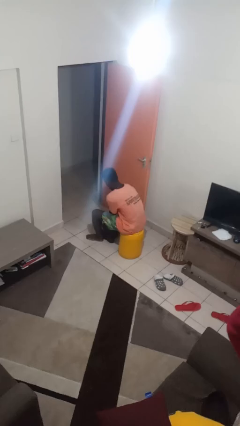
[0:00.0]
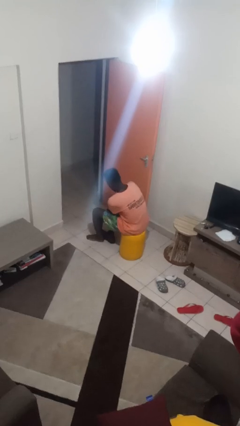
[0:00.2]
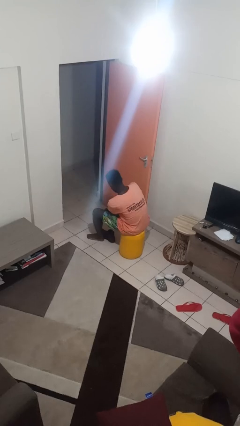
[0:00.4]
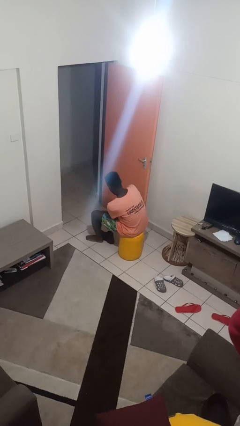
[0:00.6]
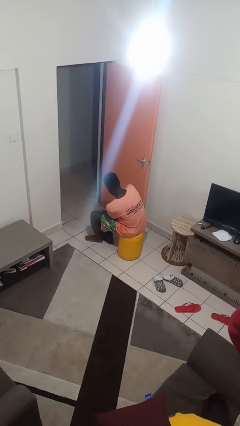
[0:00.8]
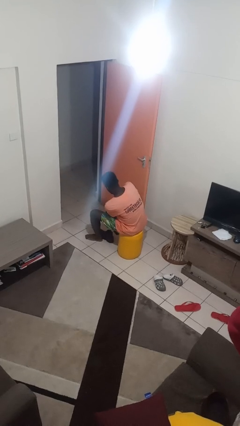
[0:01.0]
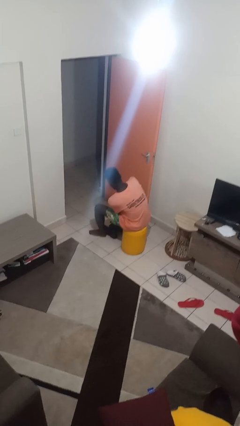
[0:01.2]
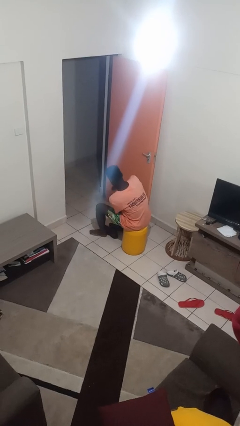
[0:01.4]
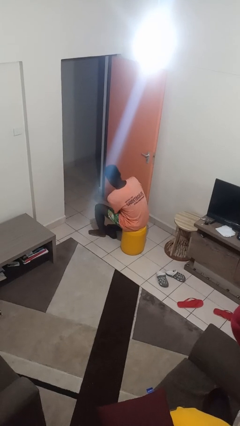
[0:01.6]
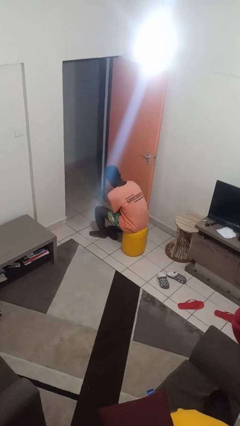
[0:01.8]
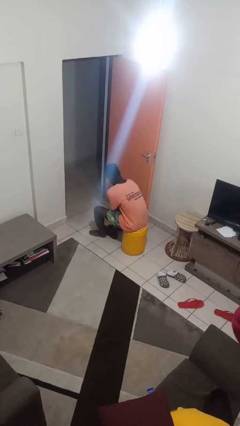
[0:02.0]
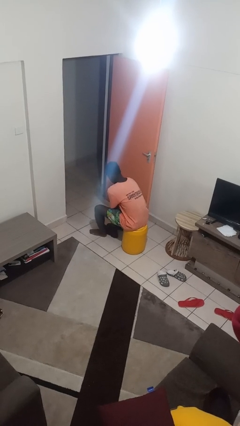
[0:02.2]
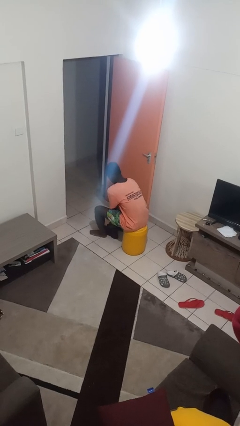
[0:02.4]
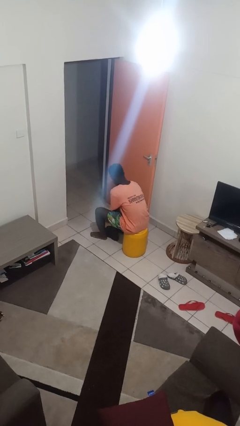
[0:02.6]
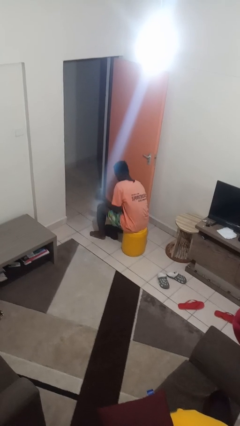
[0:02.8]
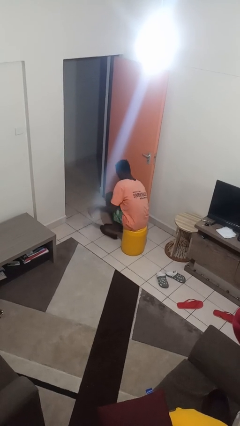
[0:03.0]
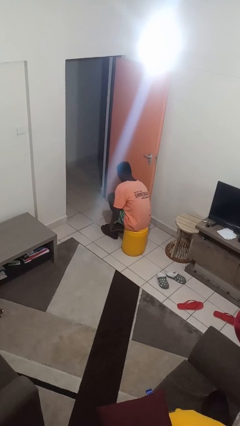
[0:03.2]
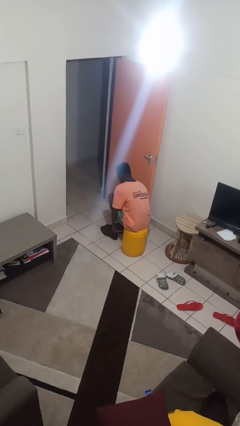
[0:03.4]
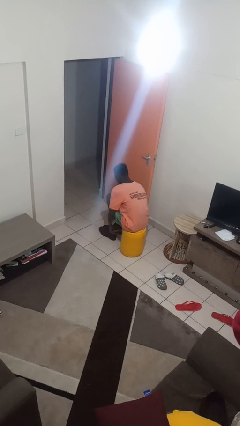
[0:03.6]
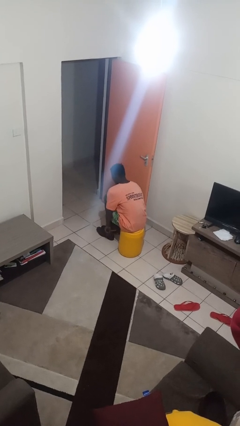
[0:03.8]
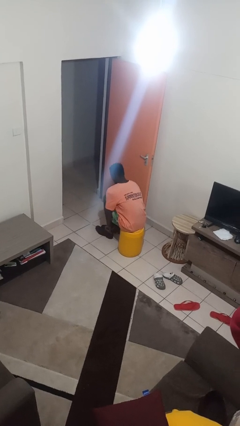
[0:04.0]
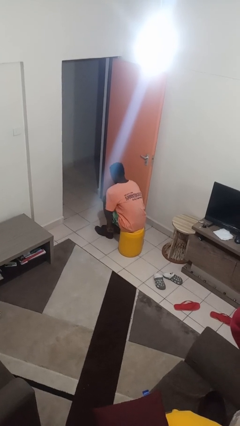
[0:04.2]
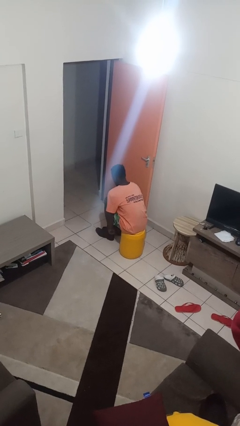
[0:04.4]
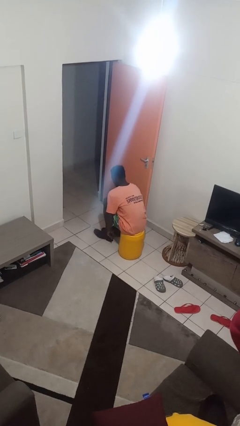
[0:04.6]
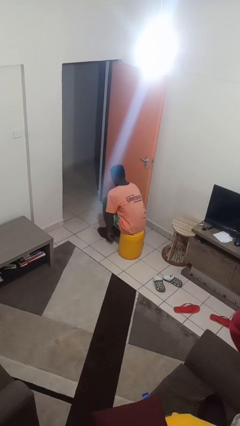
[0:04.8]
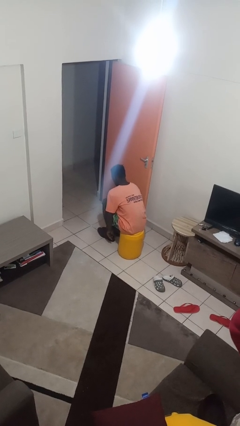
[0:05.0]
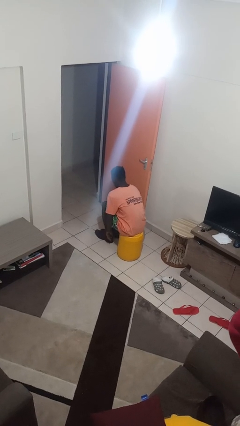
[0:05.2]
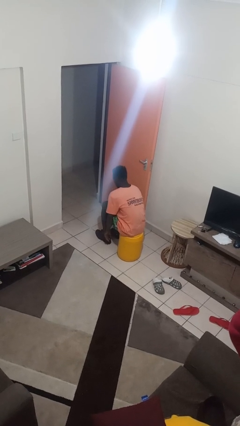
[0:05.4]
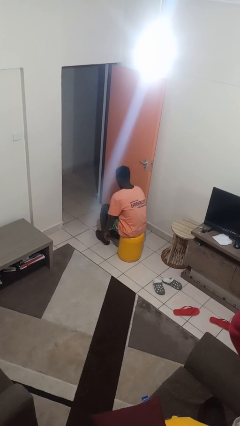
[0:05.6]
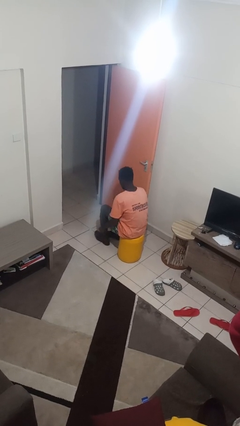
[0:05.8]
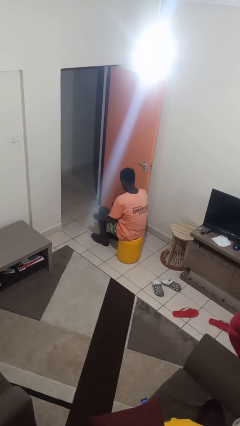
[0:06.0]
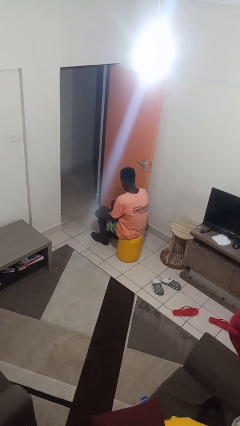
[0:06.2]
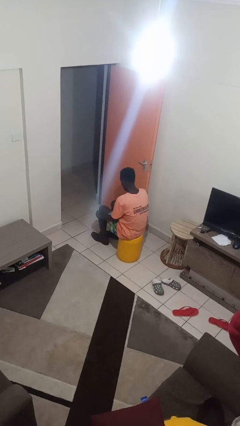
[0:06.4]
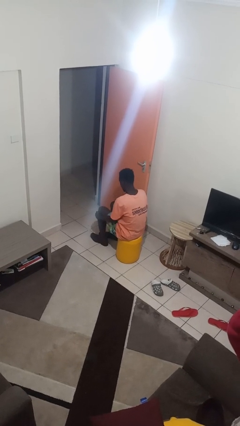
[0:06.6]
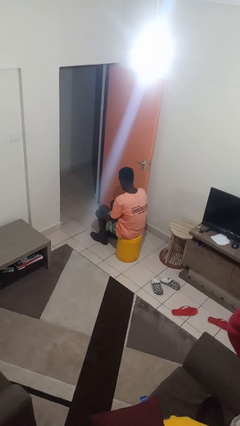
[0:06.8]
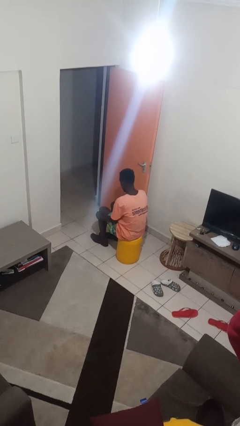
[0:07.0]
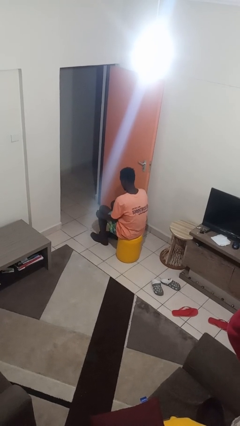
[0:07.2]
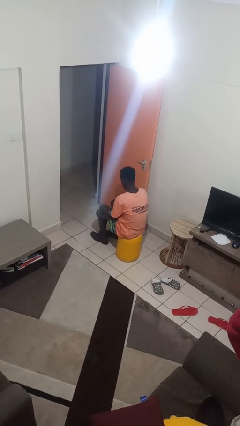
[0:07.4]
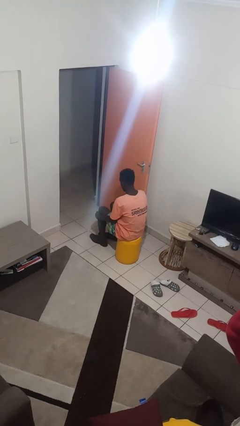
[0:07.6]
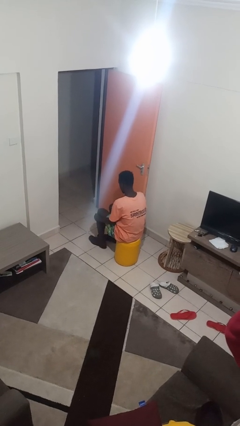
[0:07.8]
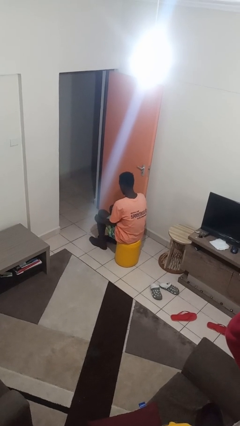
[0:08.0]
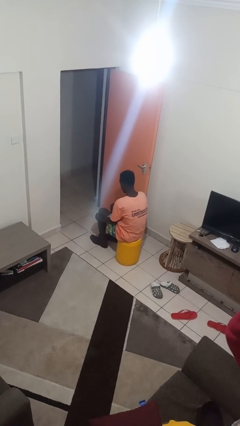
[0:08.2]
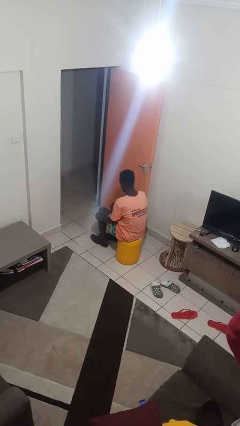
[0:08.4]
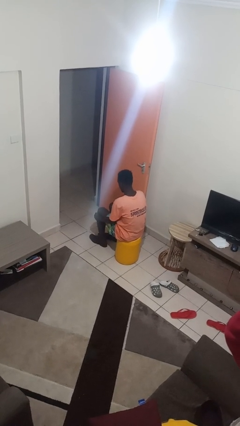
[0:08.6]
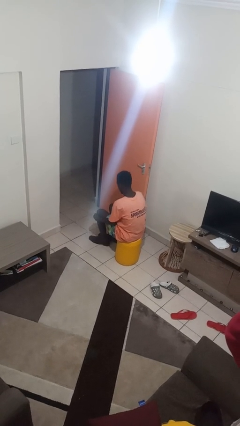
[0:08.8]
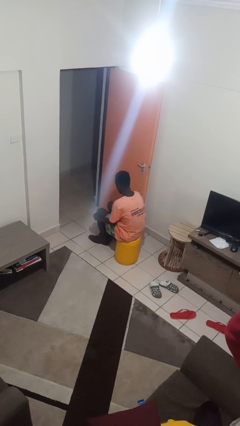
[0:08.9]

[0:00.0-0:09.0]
person puts on shoes

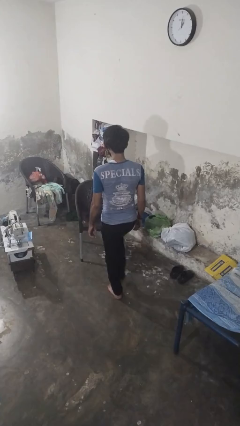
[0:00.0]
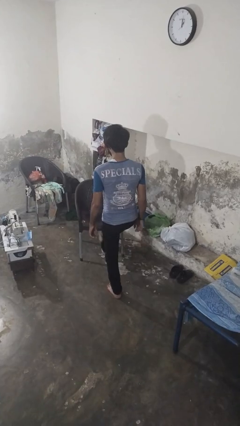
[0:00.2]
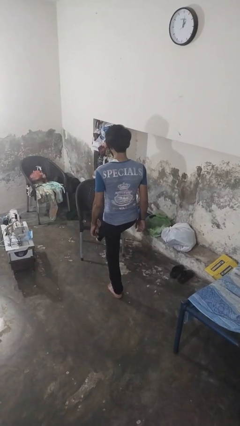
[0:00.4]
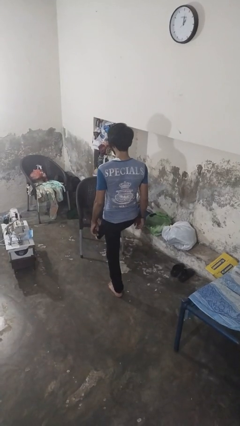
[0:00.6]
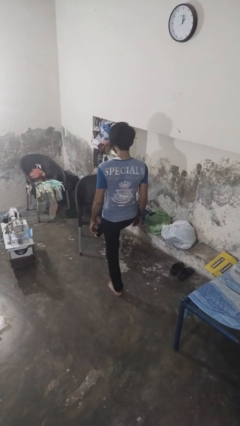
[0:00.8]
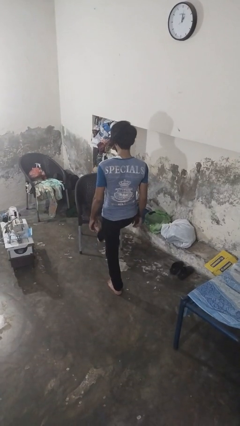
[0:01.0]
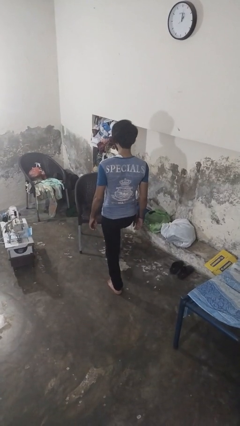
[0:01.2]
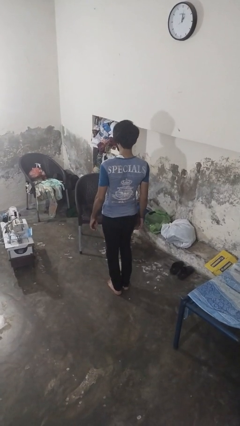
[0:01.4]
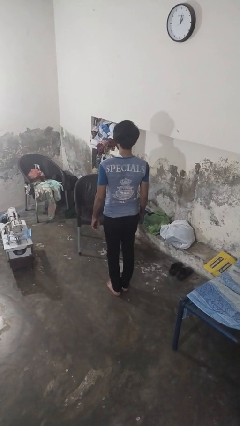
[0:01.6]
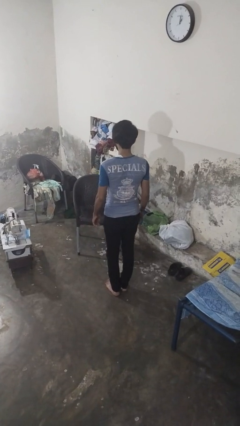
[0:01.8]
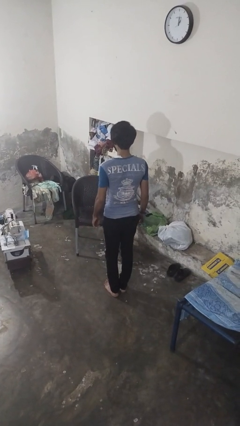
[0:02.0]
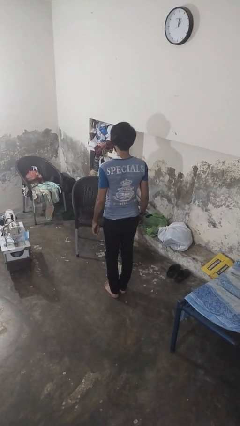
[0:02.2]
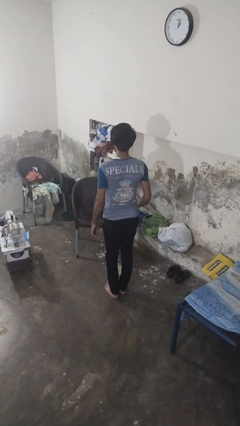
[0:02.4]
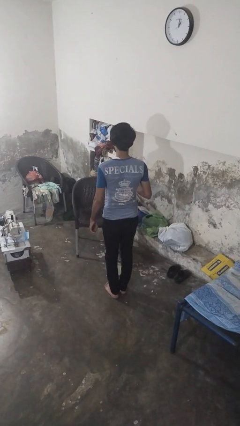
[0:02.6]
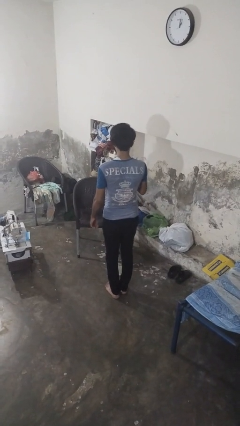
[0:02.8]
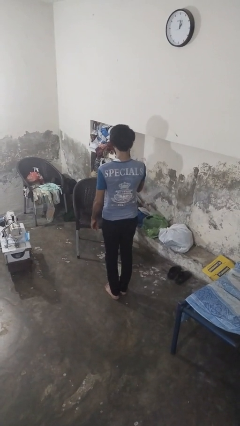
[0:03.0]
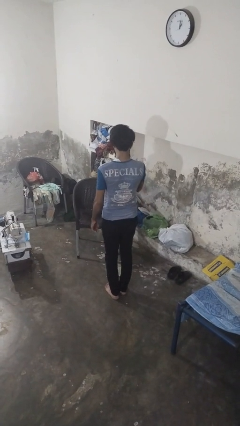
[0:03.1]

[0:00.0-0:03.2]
person stubs toe

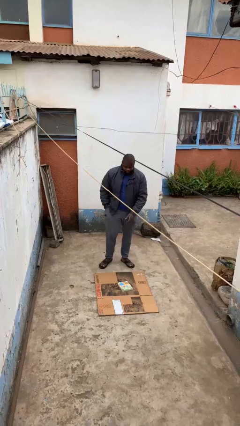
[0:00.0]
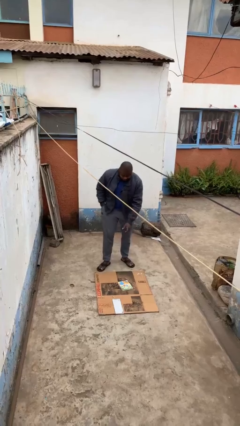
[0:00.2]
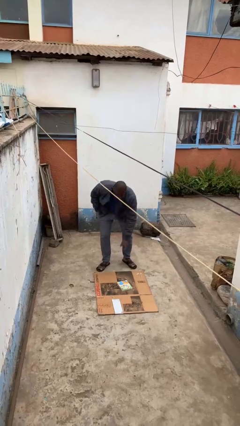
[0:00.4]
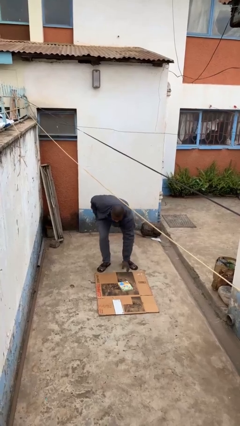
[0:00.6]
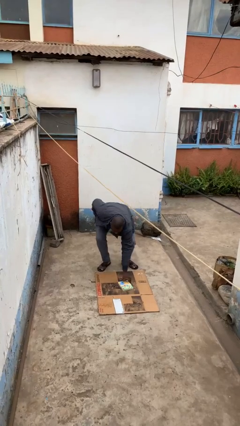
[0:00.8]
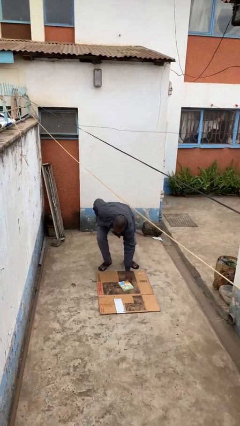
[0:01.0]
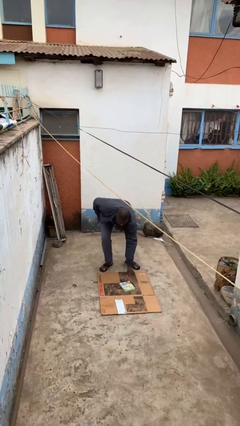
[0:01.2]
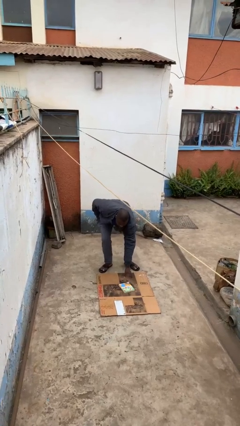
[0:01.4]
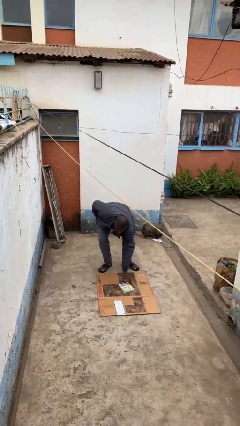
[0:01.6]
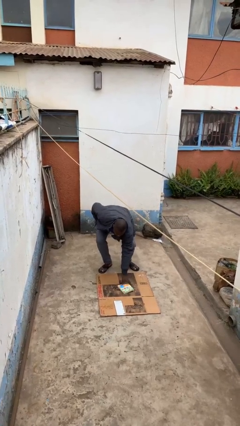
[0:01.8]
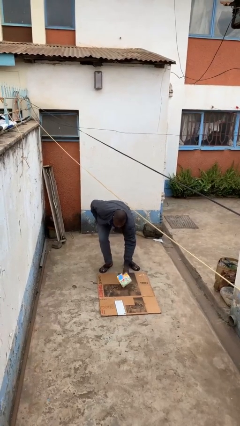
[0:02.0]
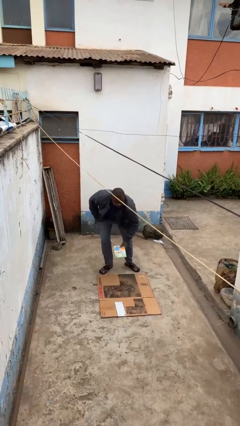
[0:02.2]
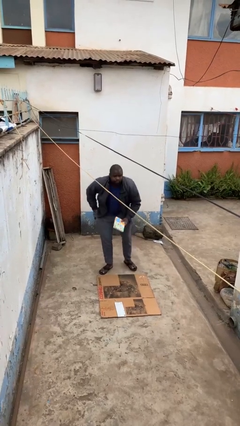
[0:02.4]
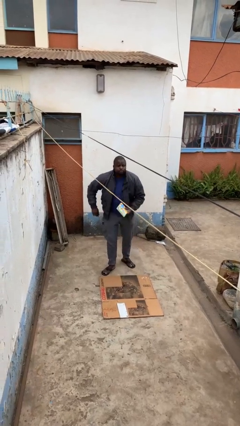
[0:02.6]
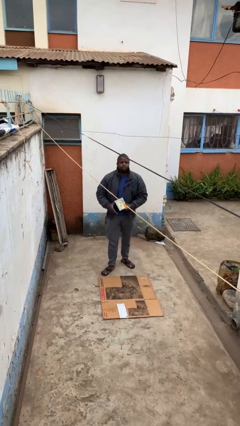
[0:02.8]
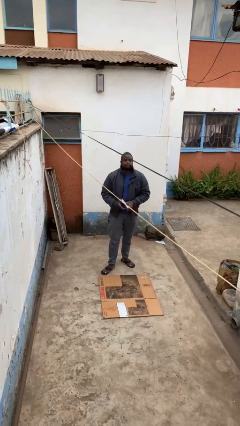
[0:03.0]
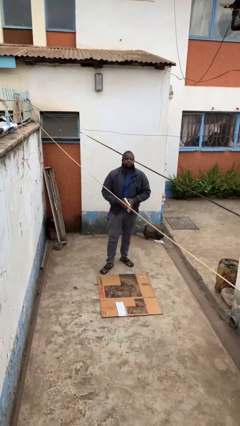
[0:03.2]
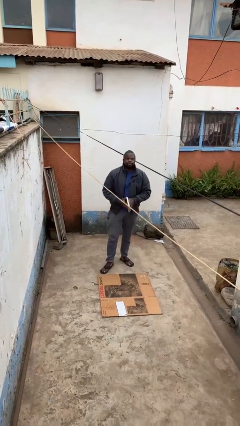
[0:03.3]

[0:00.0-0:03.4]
person picks up object from floor

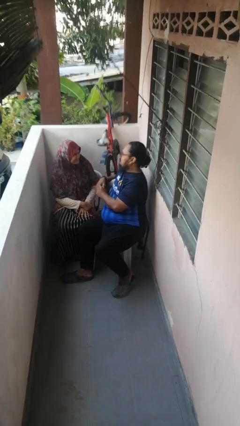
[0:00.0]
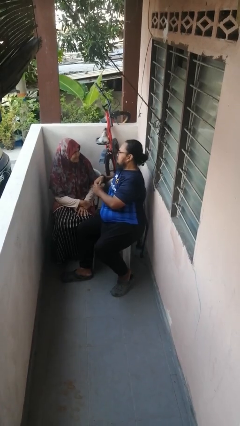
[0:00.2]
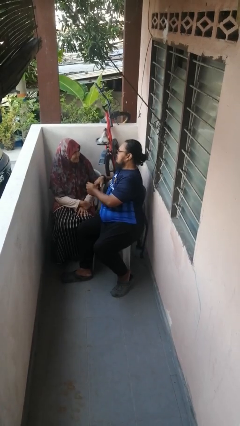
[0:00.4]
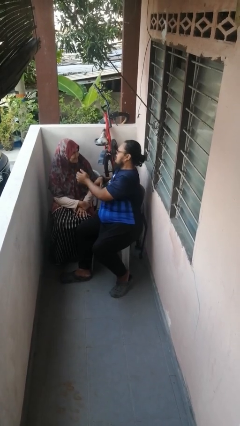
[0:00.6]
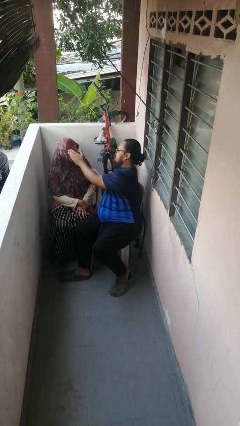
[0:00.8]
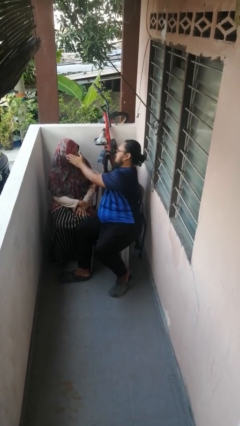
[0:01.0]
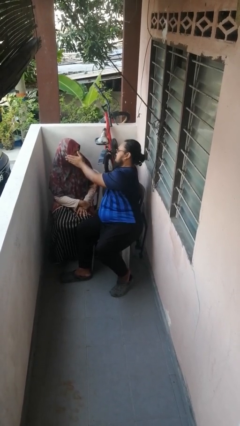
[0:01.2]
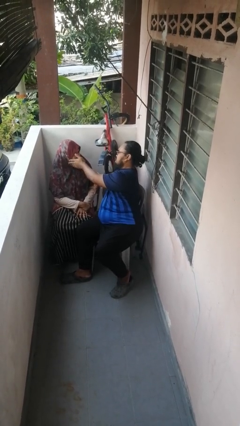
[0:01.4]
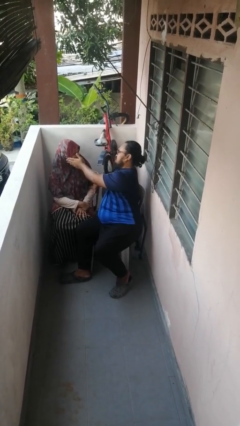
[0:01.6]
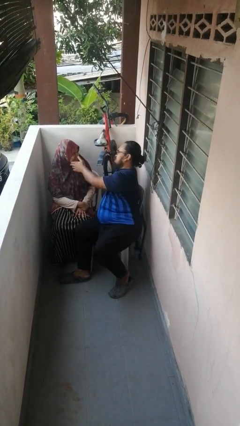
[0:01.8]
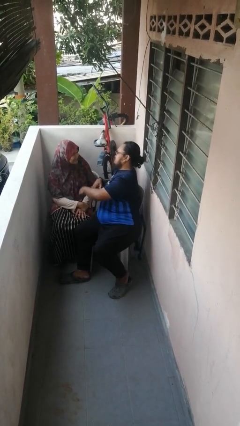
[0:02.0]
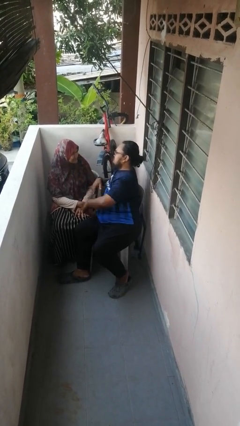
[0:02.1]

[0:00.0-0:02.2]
person touches face of person
